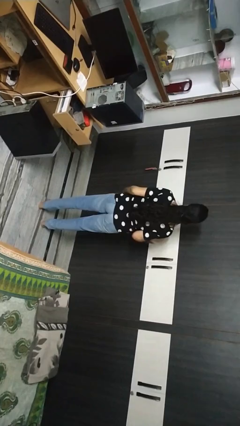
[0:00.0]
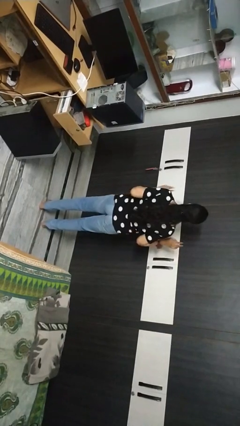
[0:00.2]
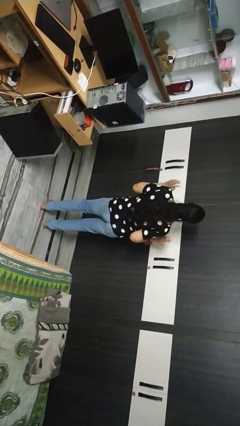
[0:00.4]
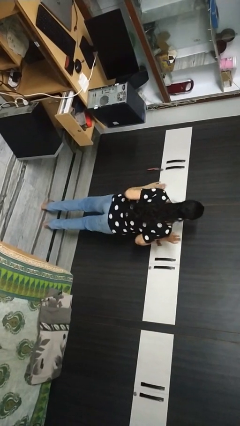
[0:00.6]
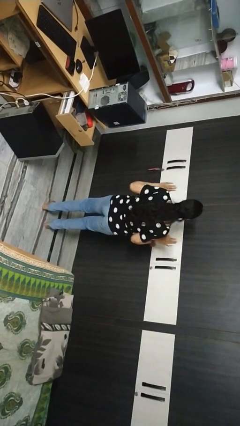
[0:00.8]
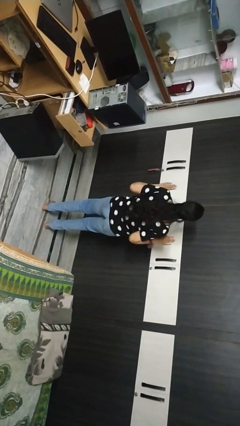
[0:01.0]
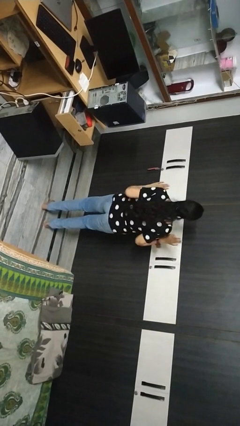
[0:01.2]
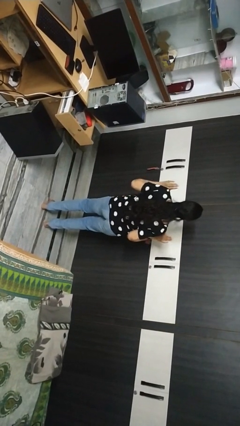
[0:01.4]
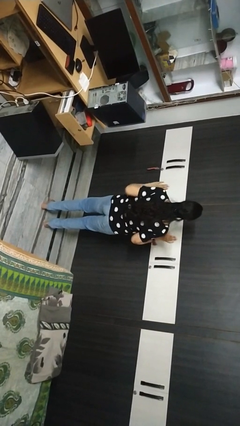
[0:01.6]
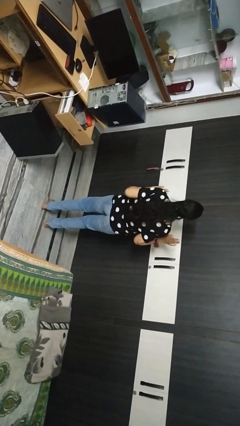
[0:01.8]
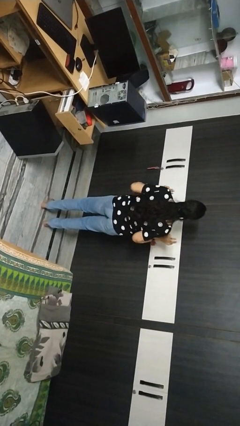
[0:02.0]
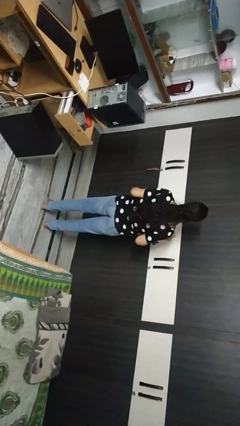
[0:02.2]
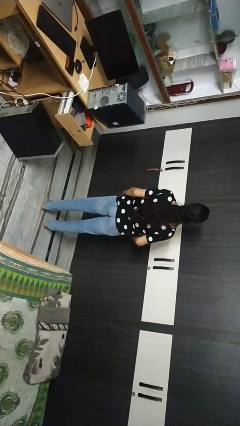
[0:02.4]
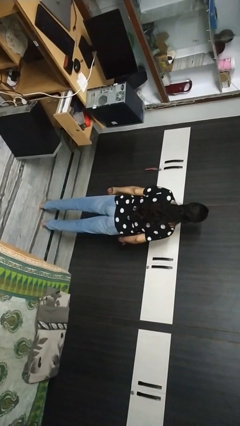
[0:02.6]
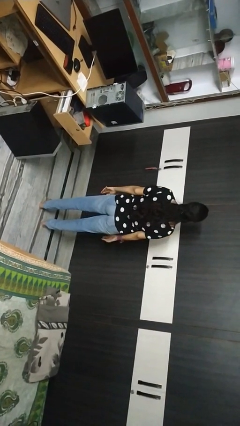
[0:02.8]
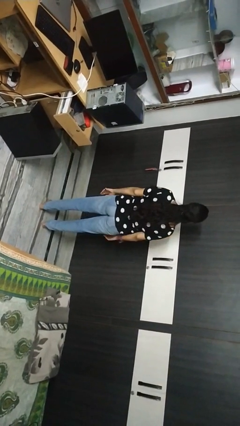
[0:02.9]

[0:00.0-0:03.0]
person dances in place

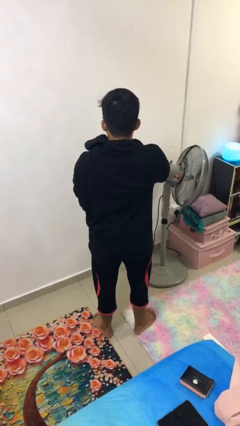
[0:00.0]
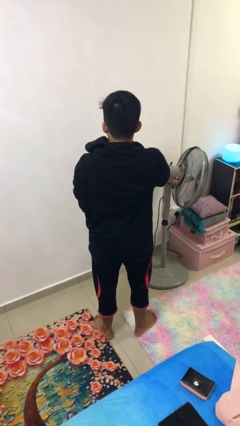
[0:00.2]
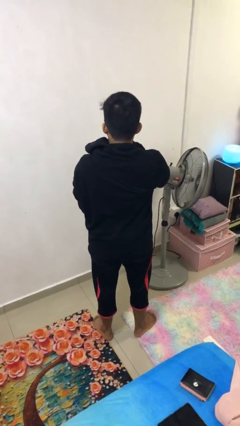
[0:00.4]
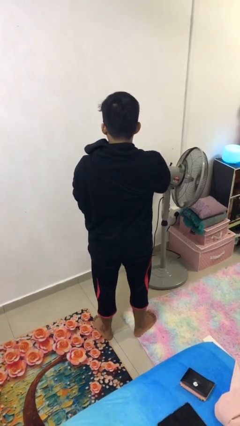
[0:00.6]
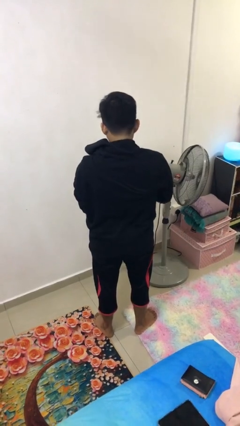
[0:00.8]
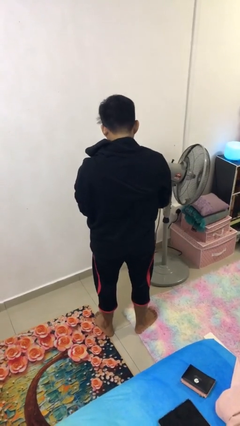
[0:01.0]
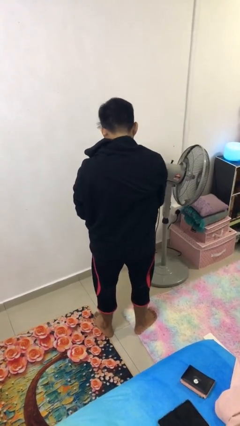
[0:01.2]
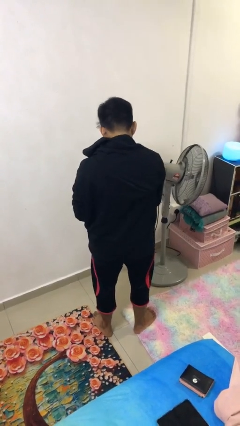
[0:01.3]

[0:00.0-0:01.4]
person unzips jacket

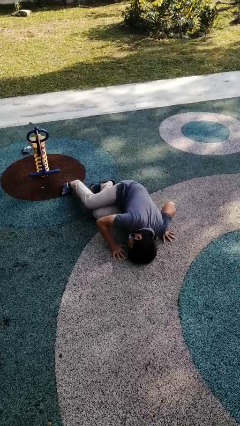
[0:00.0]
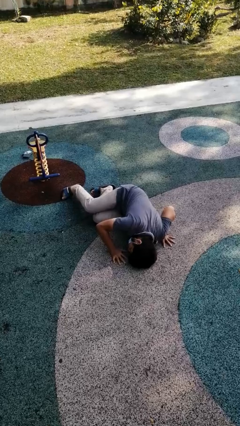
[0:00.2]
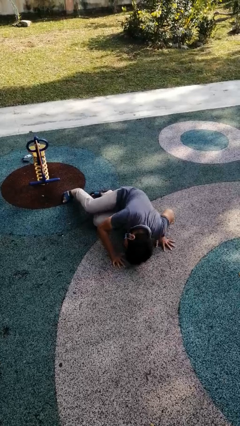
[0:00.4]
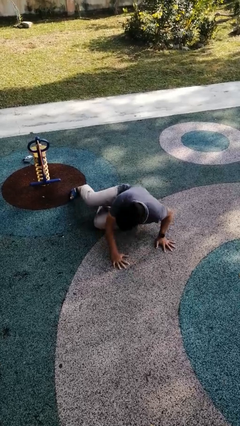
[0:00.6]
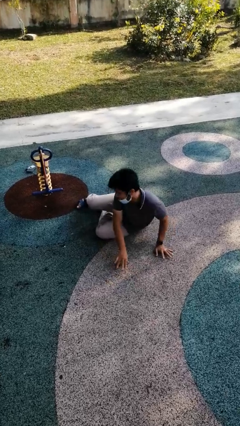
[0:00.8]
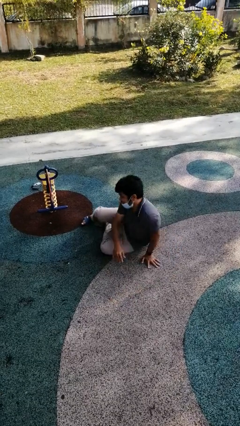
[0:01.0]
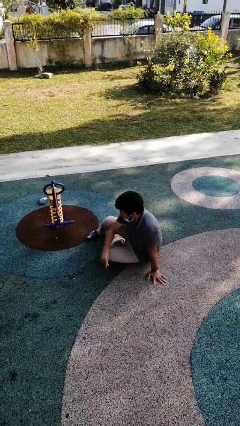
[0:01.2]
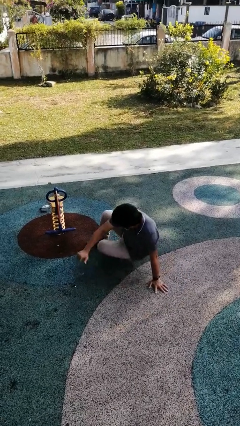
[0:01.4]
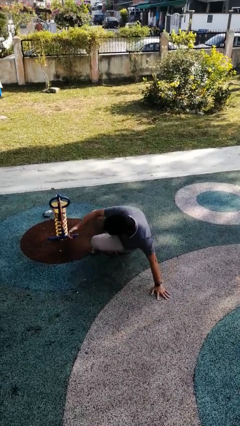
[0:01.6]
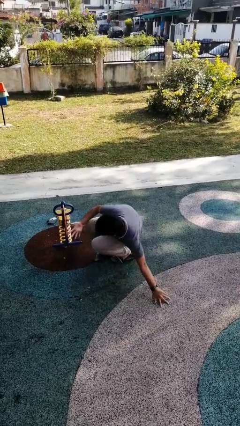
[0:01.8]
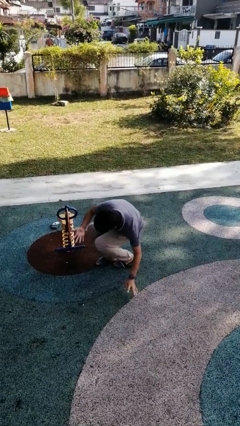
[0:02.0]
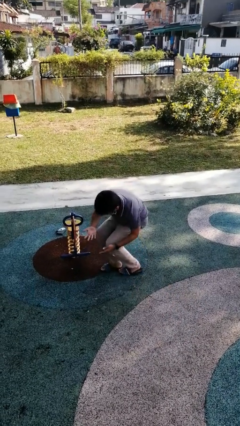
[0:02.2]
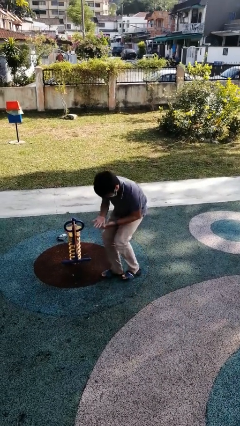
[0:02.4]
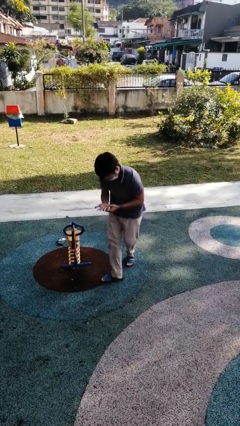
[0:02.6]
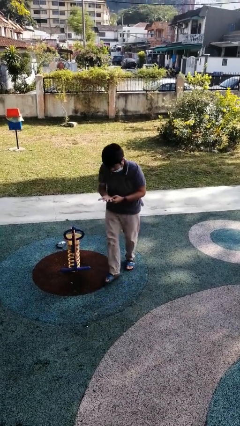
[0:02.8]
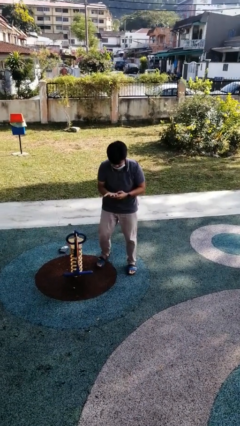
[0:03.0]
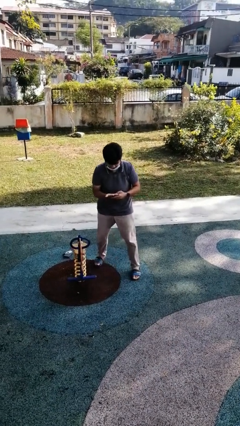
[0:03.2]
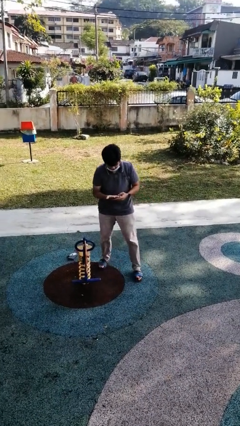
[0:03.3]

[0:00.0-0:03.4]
person stands up from floor

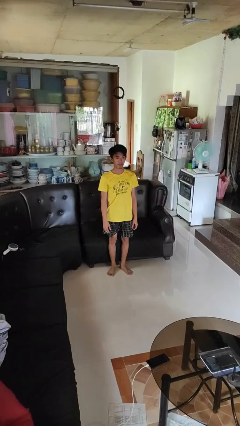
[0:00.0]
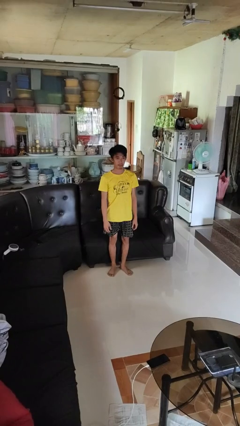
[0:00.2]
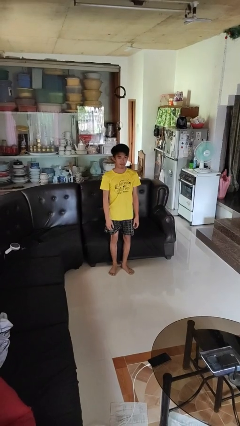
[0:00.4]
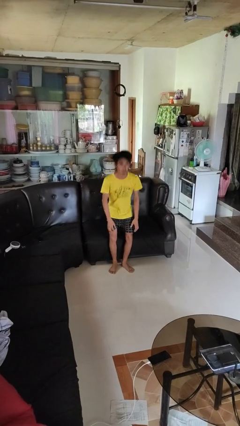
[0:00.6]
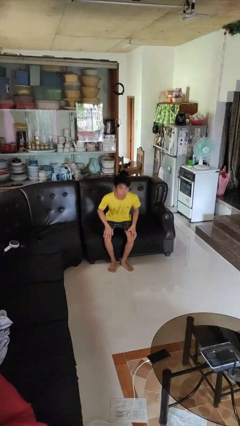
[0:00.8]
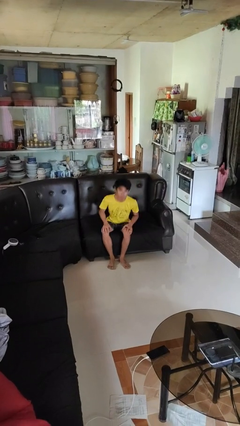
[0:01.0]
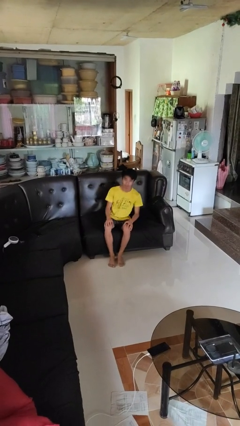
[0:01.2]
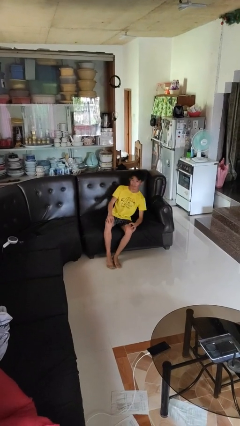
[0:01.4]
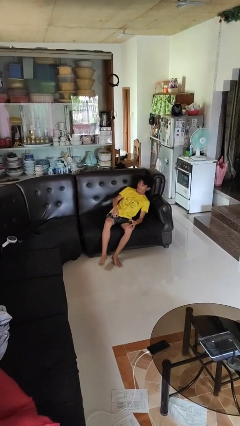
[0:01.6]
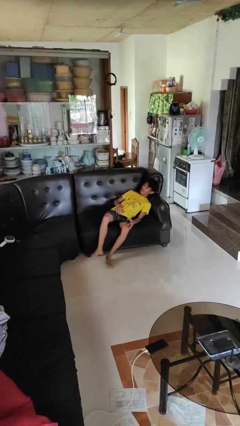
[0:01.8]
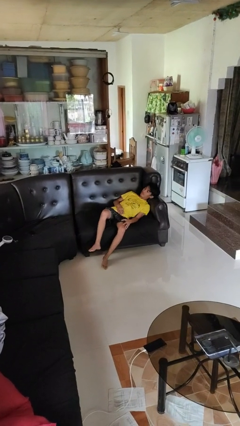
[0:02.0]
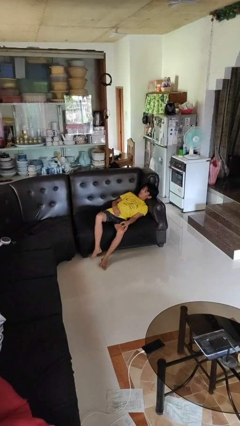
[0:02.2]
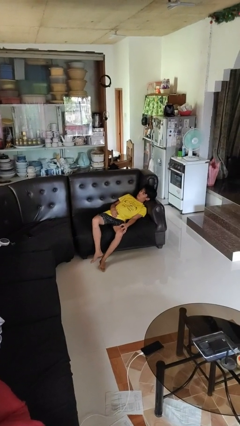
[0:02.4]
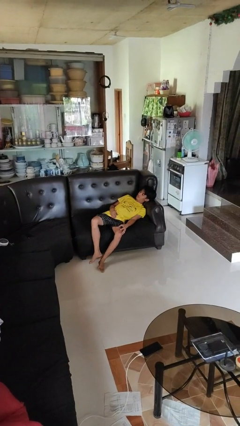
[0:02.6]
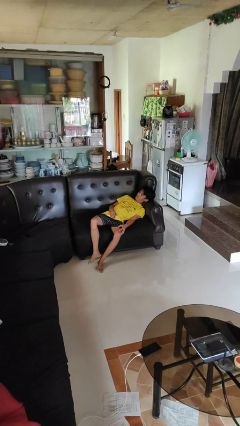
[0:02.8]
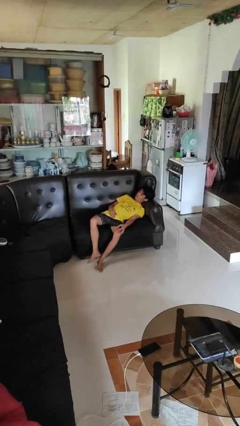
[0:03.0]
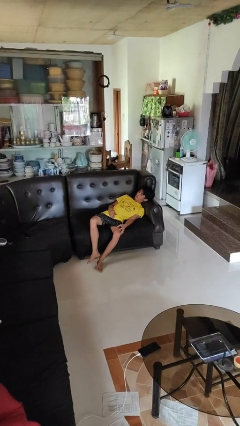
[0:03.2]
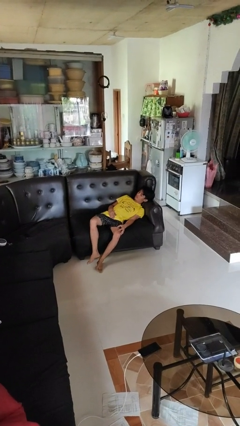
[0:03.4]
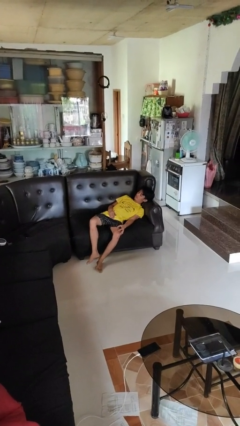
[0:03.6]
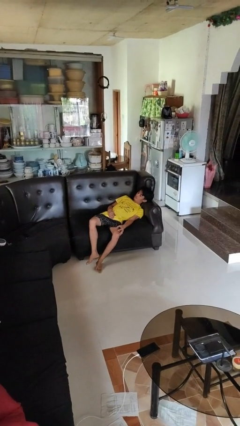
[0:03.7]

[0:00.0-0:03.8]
person lies down on couch

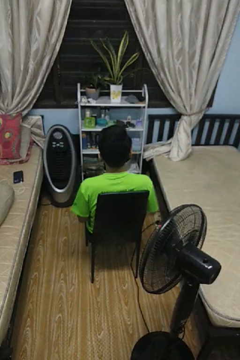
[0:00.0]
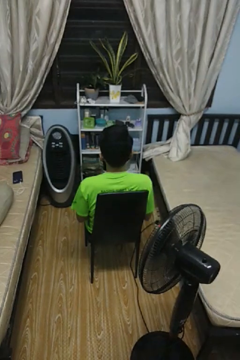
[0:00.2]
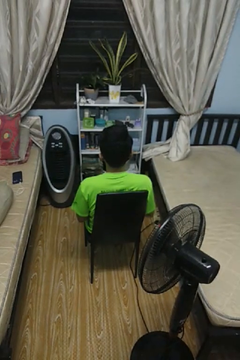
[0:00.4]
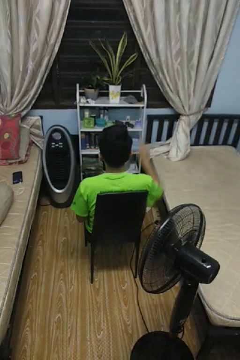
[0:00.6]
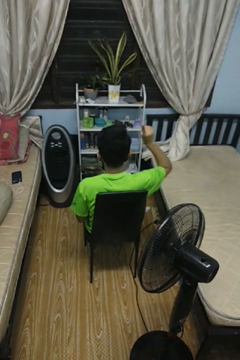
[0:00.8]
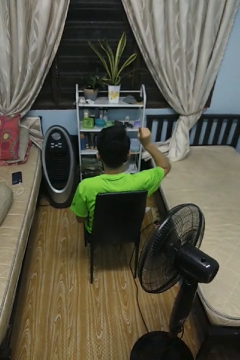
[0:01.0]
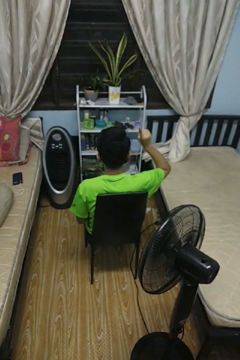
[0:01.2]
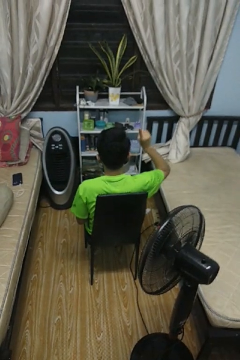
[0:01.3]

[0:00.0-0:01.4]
person gestures number one

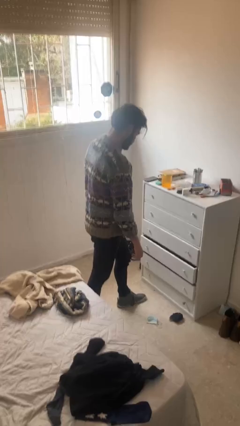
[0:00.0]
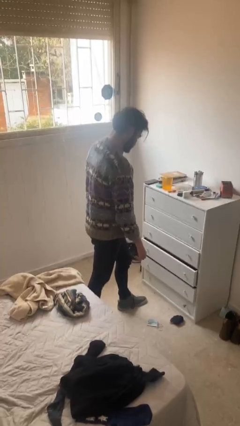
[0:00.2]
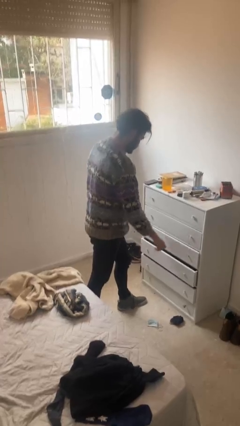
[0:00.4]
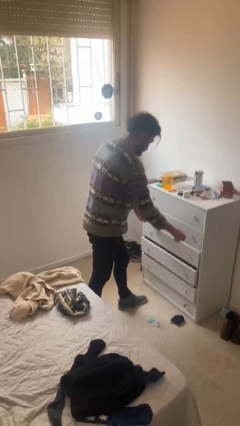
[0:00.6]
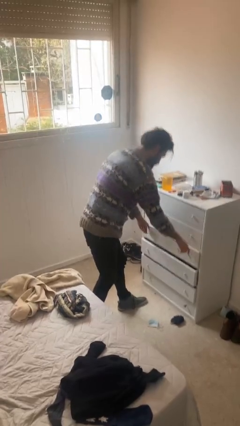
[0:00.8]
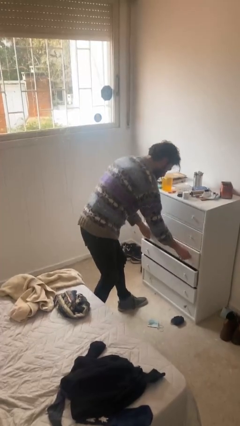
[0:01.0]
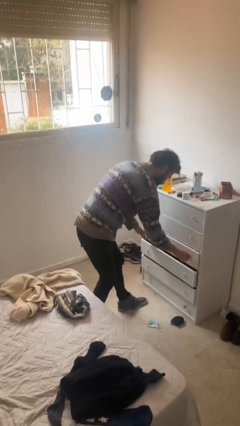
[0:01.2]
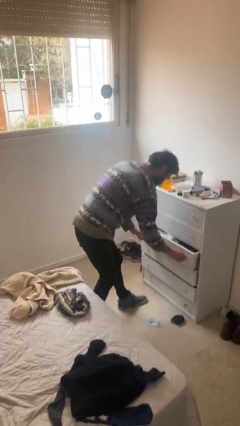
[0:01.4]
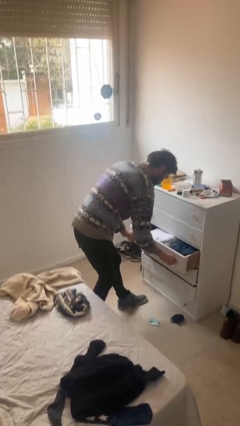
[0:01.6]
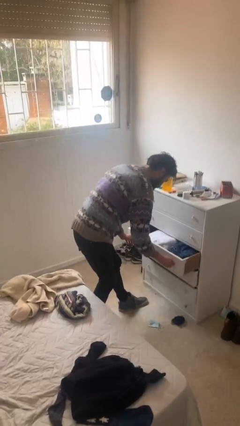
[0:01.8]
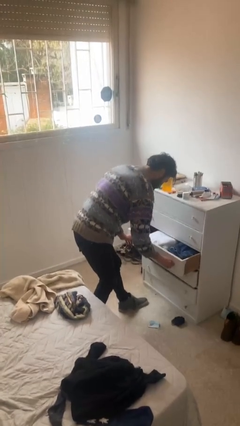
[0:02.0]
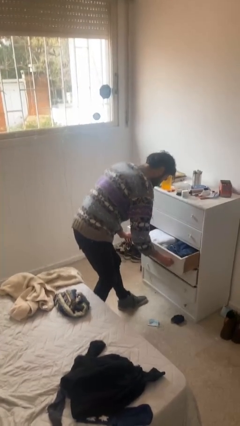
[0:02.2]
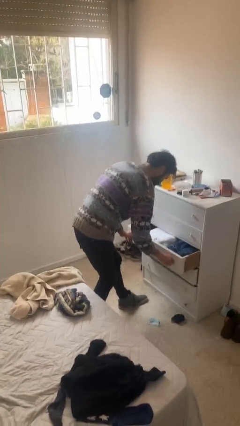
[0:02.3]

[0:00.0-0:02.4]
person opens dresser drawer

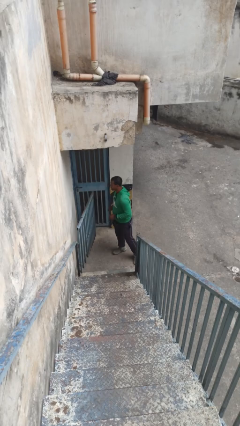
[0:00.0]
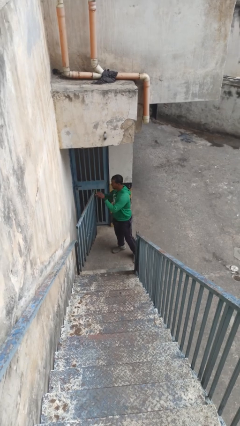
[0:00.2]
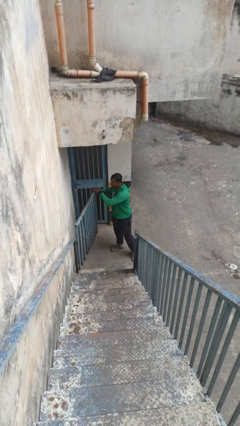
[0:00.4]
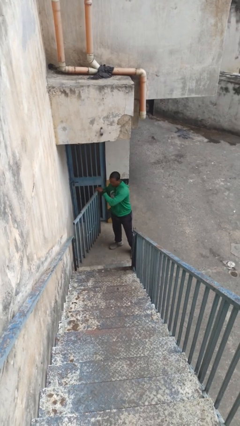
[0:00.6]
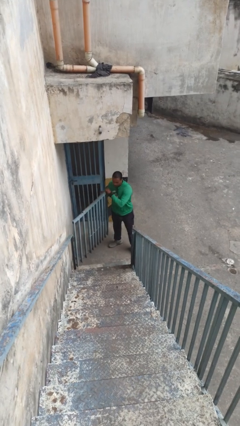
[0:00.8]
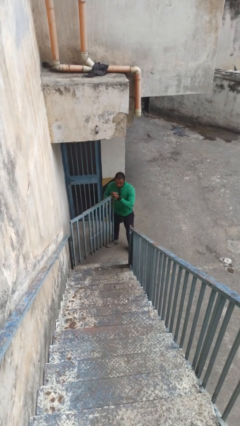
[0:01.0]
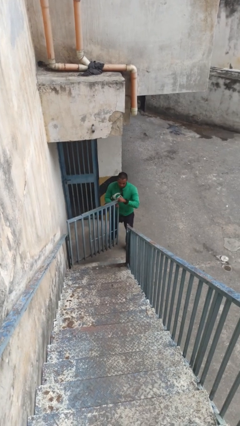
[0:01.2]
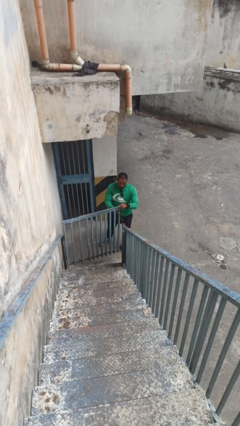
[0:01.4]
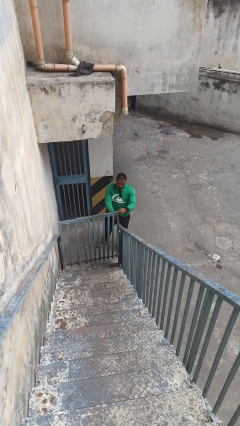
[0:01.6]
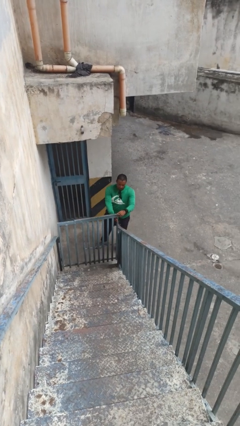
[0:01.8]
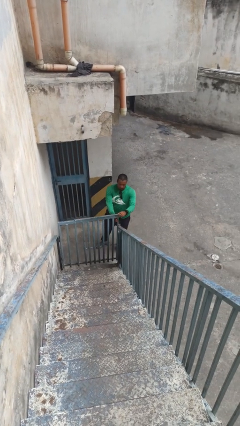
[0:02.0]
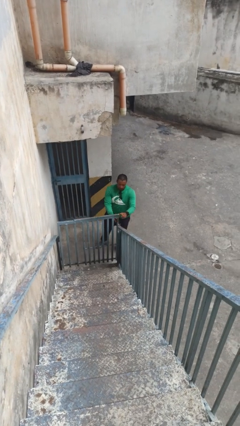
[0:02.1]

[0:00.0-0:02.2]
person closes facility door
